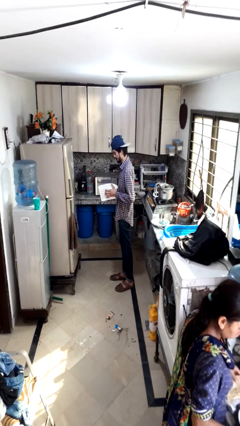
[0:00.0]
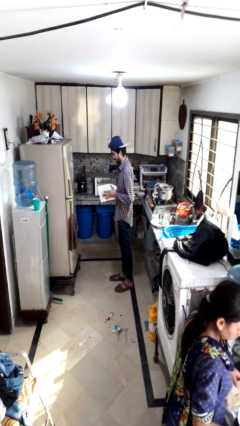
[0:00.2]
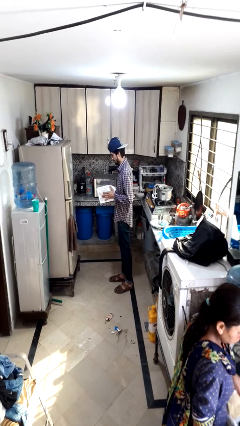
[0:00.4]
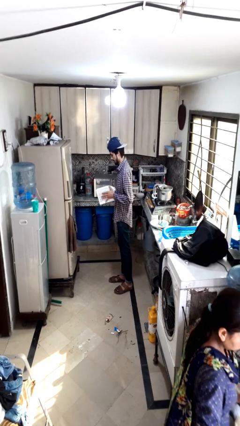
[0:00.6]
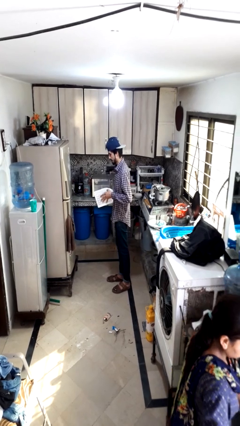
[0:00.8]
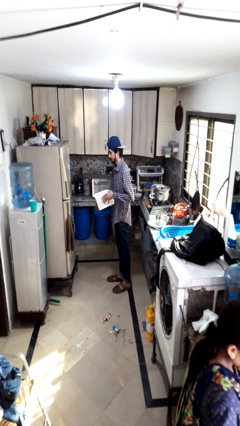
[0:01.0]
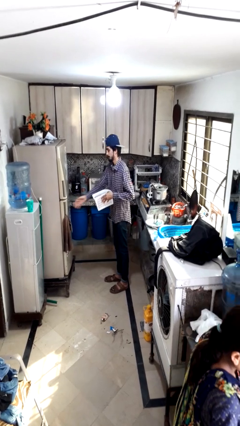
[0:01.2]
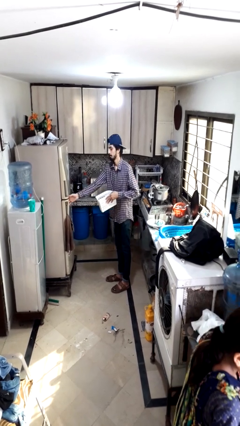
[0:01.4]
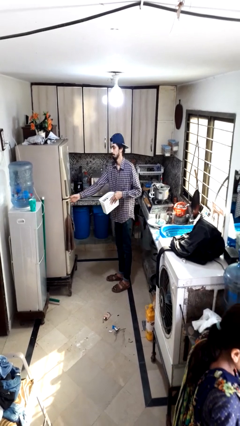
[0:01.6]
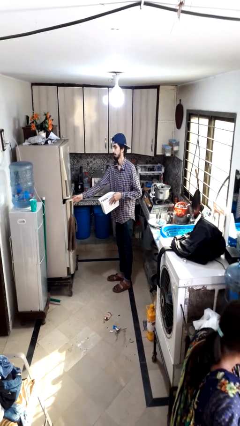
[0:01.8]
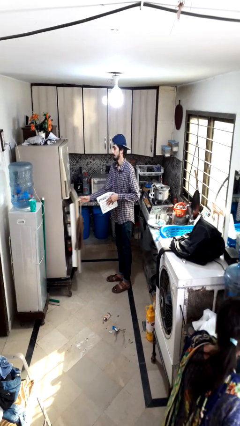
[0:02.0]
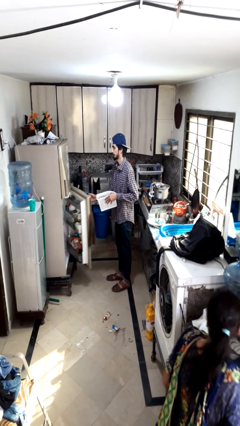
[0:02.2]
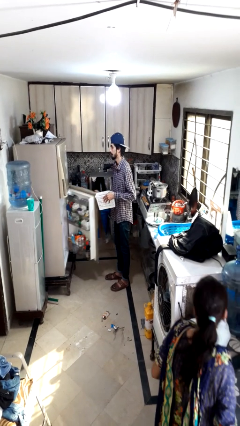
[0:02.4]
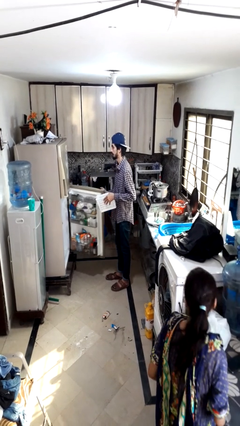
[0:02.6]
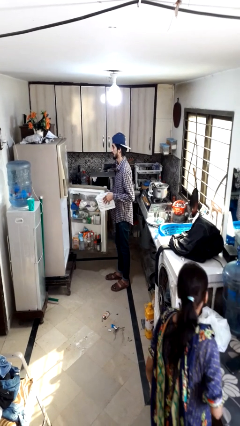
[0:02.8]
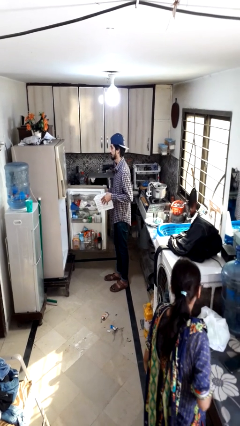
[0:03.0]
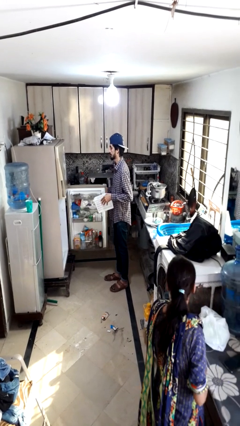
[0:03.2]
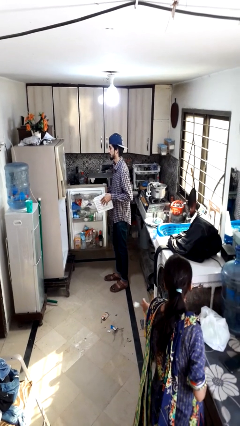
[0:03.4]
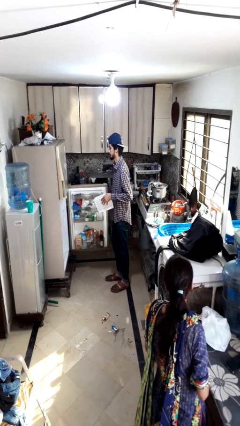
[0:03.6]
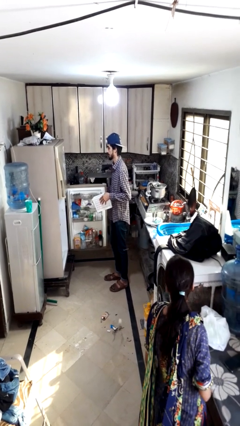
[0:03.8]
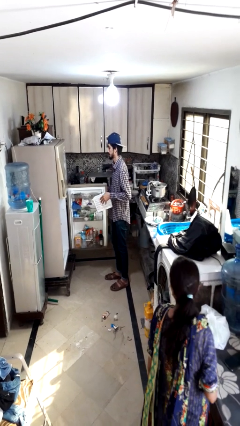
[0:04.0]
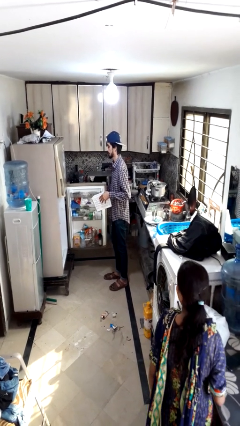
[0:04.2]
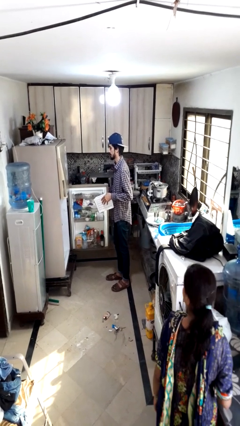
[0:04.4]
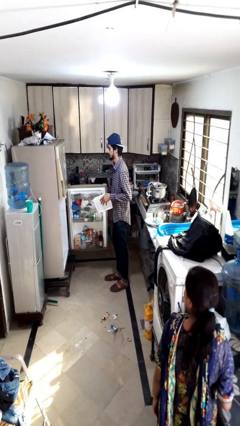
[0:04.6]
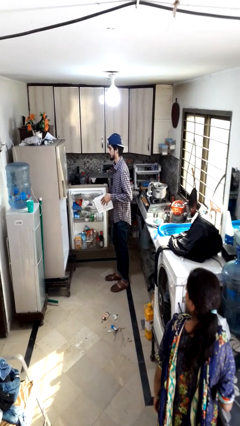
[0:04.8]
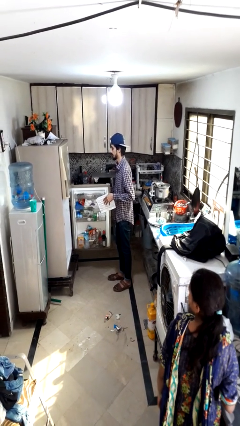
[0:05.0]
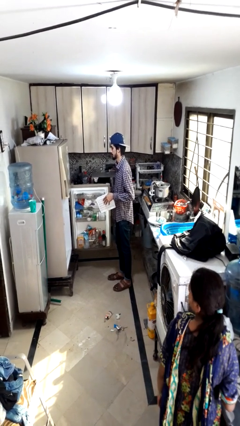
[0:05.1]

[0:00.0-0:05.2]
person opens refrigerator

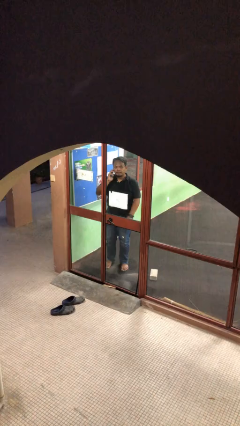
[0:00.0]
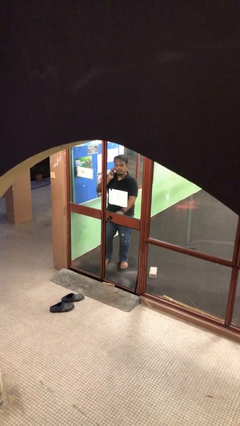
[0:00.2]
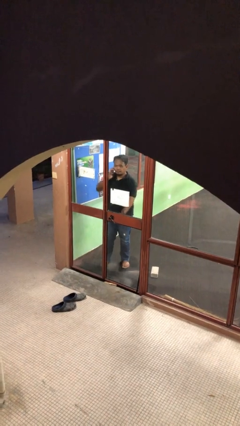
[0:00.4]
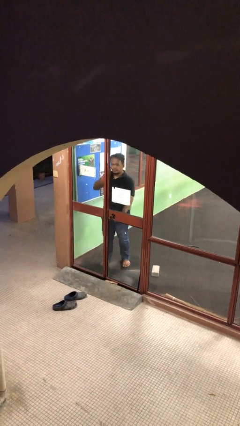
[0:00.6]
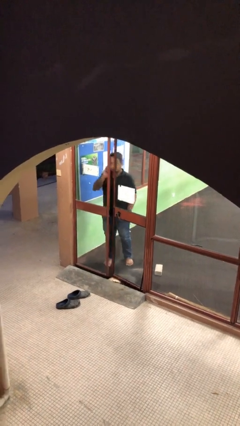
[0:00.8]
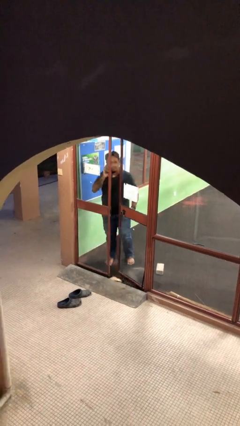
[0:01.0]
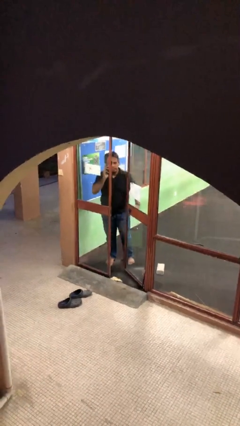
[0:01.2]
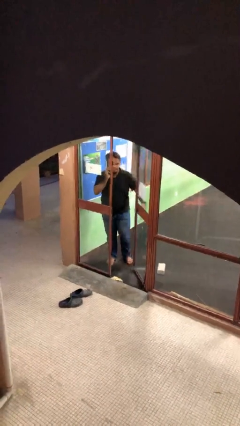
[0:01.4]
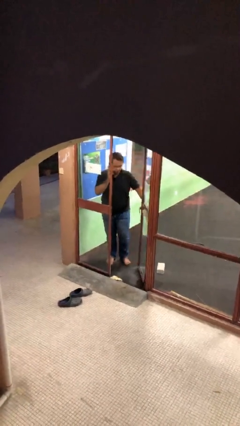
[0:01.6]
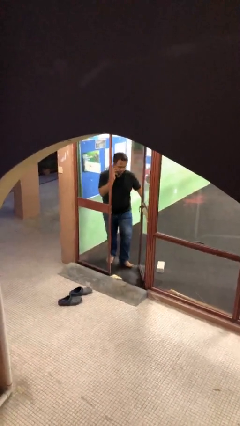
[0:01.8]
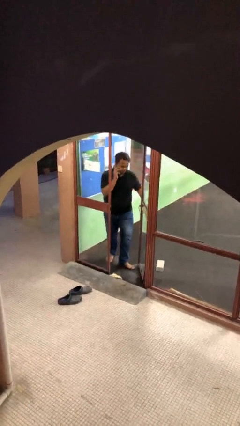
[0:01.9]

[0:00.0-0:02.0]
person opens facility door

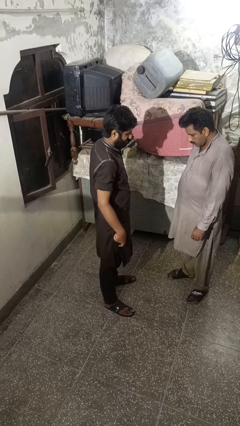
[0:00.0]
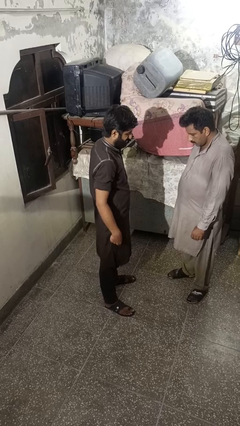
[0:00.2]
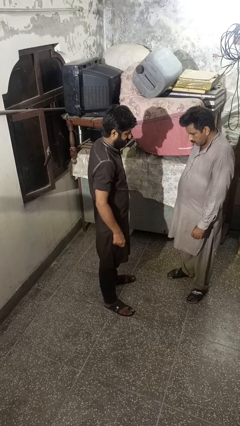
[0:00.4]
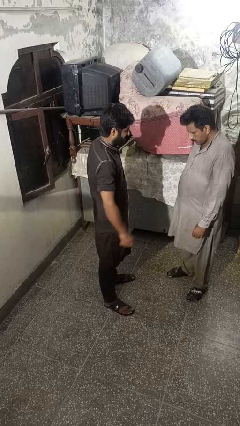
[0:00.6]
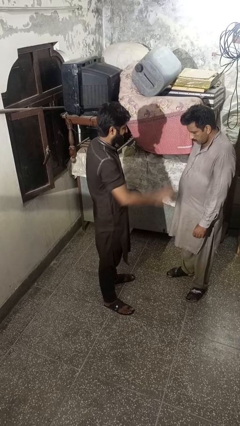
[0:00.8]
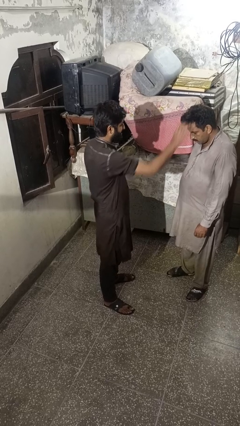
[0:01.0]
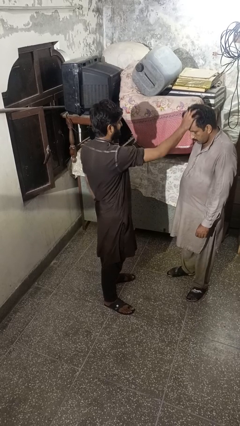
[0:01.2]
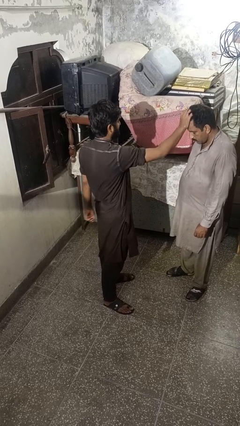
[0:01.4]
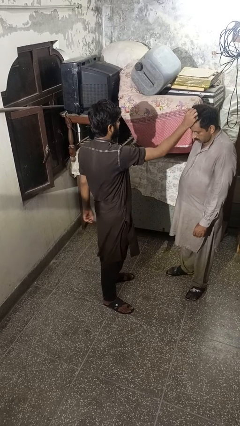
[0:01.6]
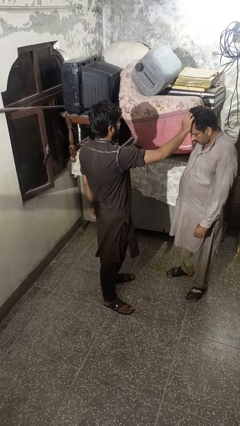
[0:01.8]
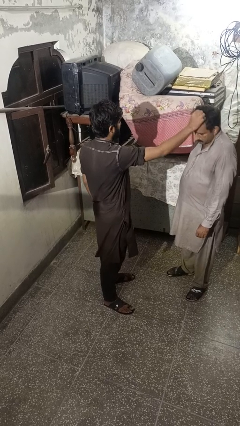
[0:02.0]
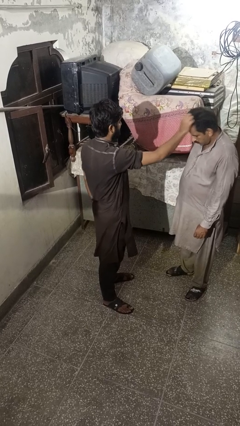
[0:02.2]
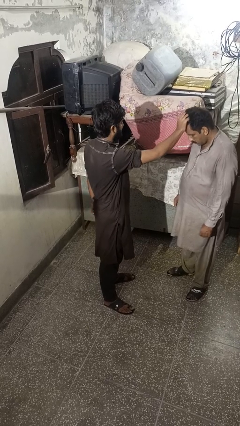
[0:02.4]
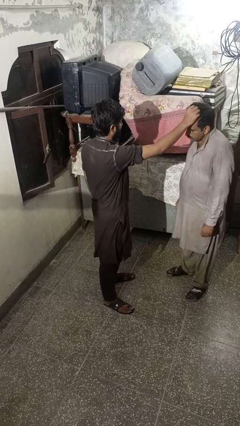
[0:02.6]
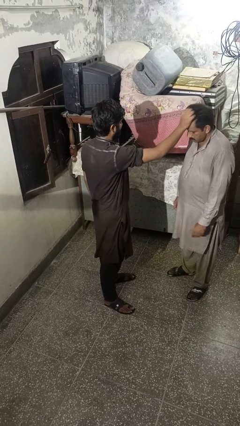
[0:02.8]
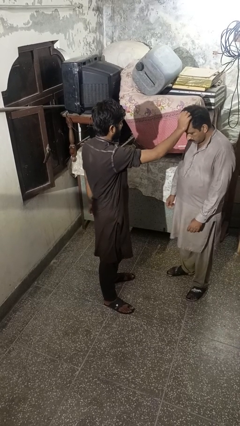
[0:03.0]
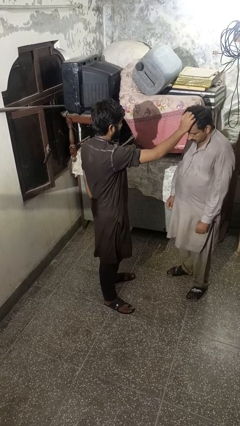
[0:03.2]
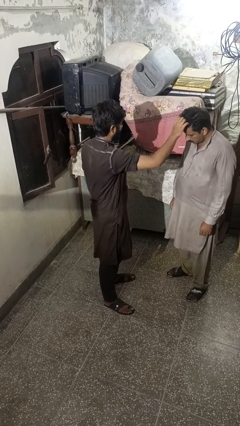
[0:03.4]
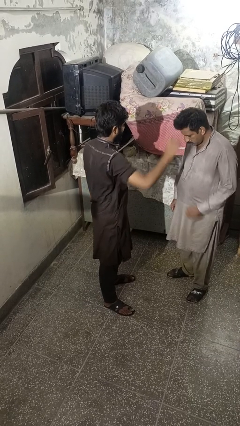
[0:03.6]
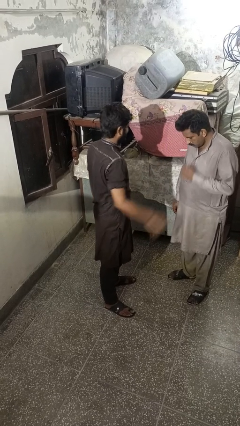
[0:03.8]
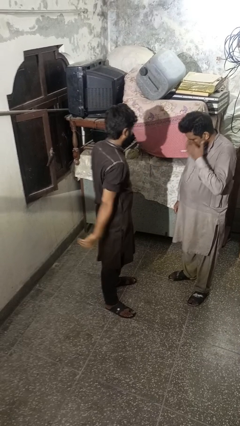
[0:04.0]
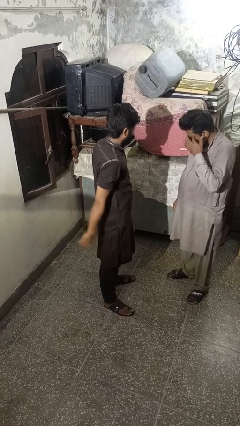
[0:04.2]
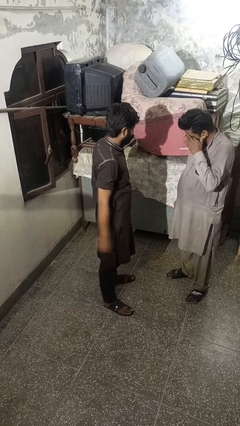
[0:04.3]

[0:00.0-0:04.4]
person grabs person by hair

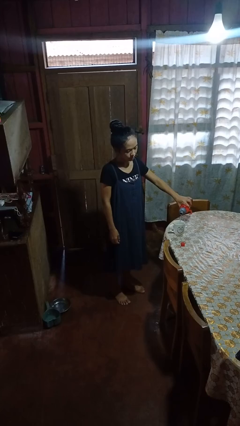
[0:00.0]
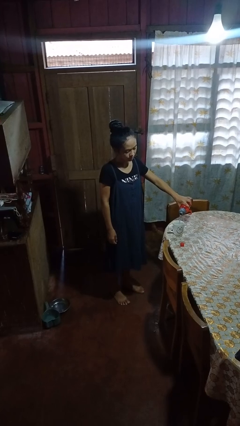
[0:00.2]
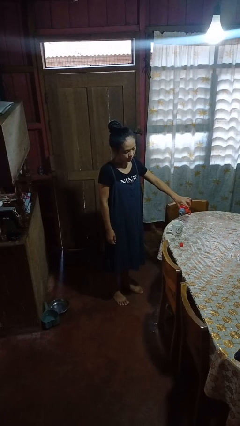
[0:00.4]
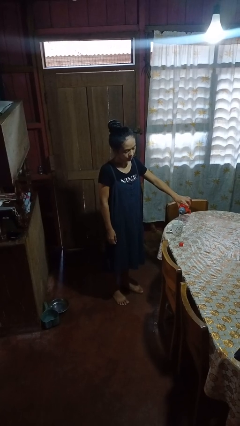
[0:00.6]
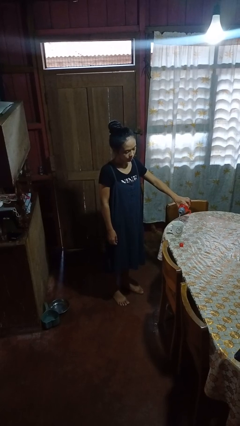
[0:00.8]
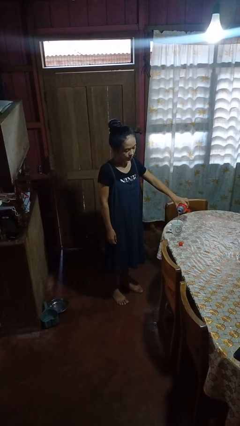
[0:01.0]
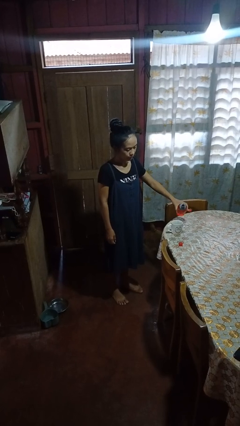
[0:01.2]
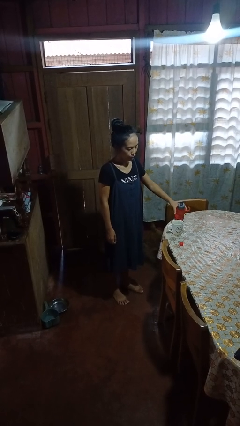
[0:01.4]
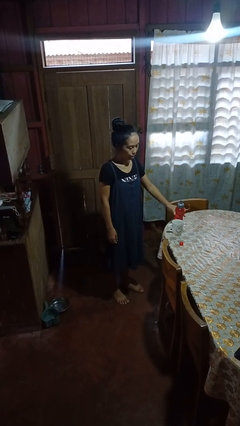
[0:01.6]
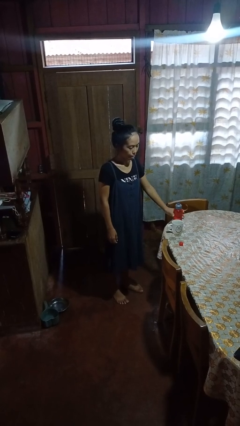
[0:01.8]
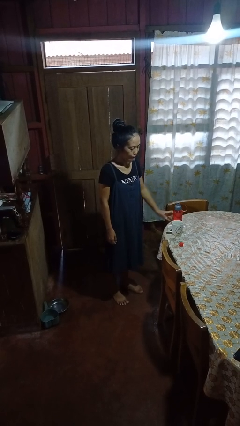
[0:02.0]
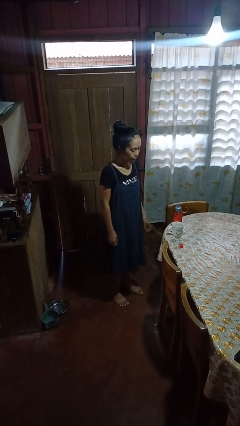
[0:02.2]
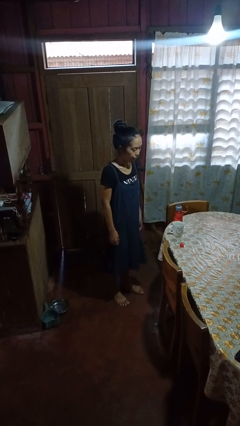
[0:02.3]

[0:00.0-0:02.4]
person pours liquid into cup

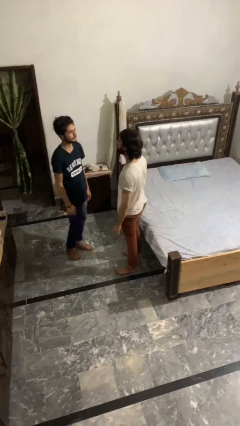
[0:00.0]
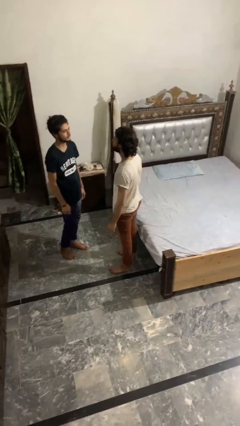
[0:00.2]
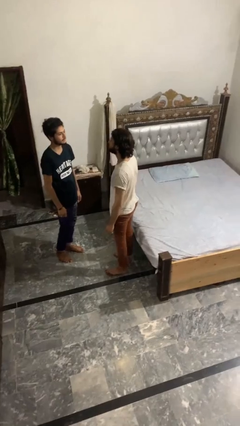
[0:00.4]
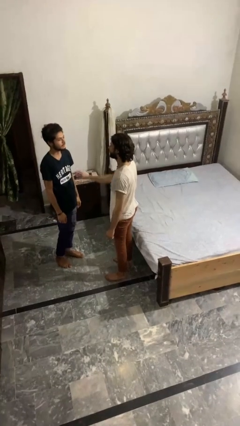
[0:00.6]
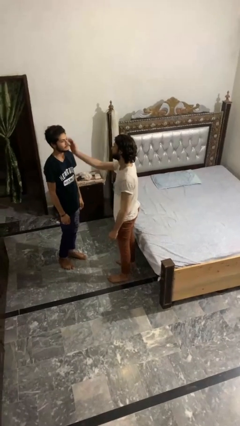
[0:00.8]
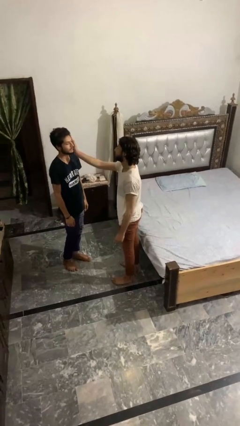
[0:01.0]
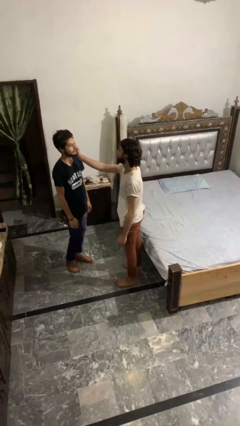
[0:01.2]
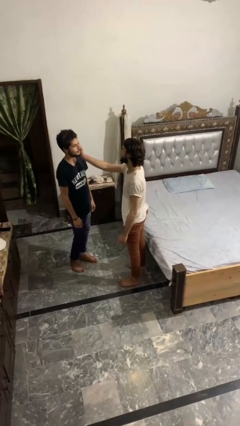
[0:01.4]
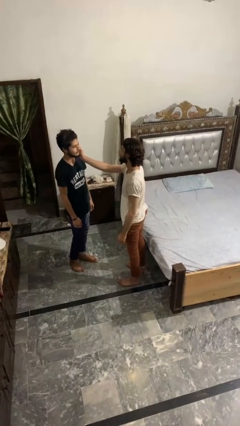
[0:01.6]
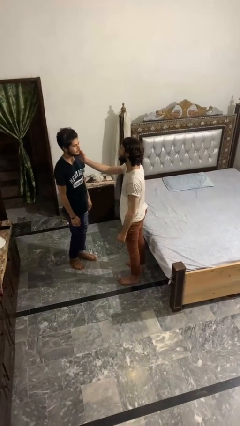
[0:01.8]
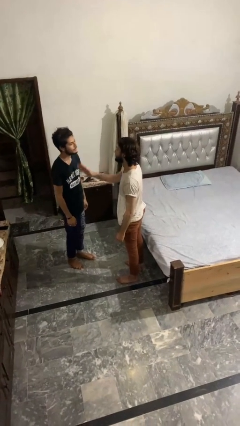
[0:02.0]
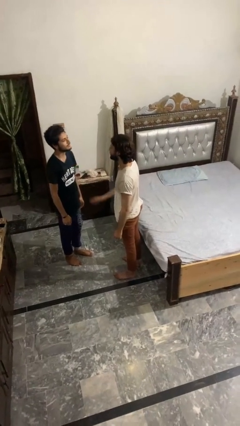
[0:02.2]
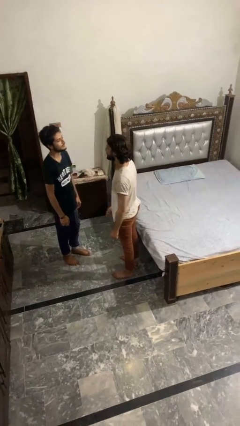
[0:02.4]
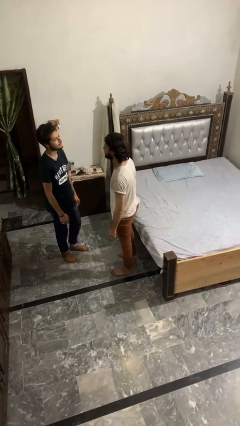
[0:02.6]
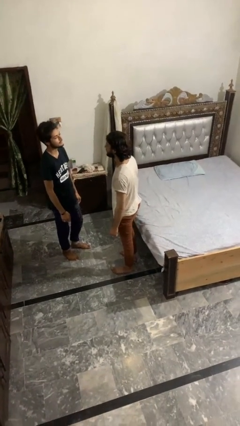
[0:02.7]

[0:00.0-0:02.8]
person touches face of person

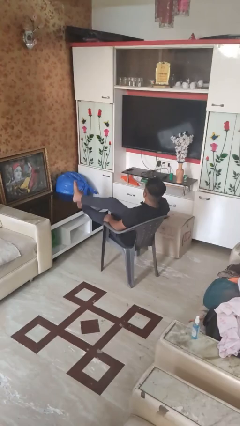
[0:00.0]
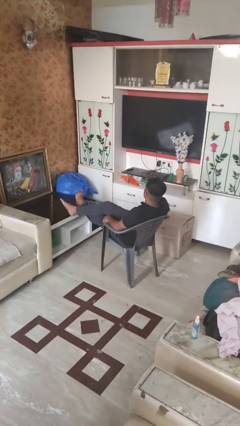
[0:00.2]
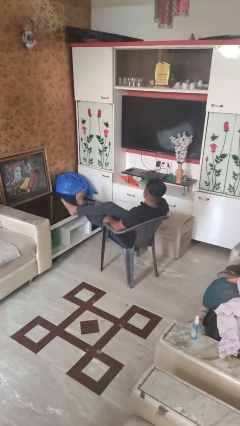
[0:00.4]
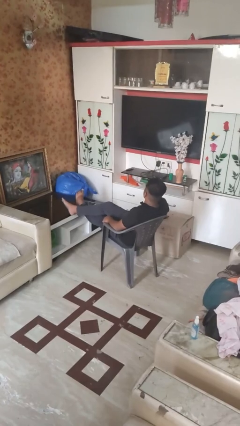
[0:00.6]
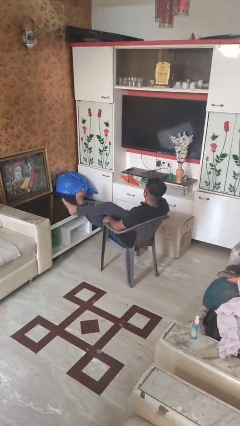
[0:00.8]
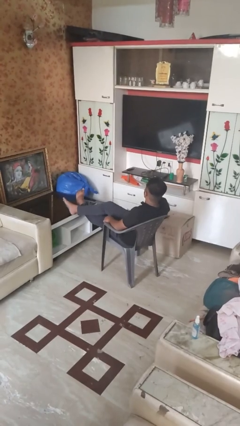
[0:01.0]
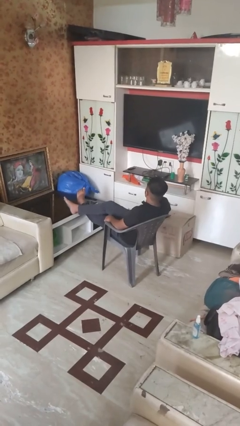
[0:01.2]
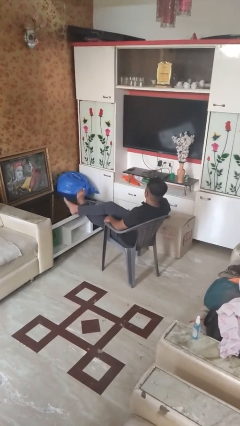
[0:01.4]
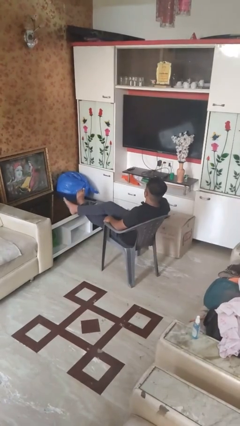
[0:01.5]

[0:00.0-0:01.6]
person crosses legs
